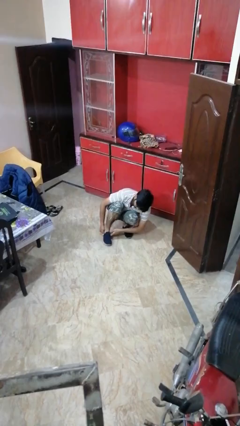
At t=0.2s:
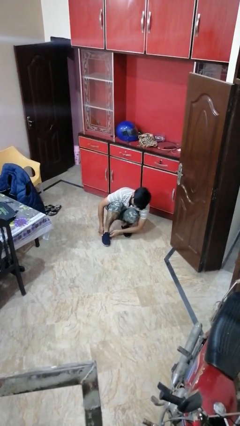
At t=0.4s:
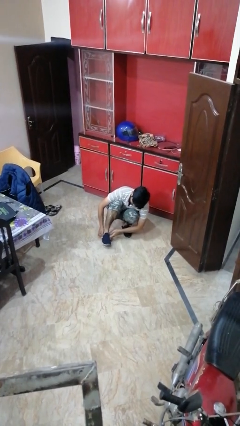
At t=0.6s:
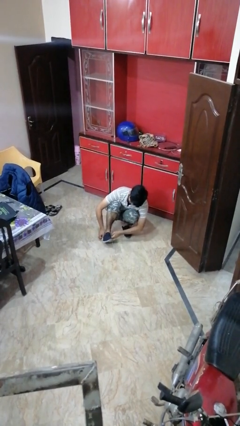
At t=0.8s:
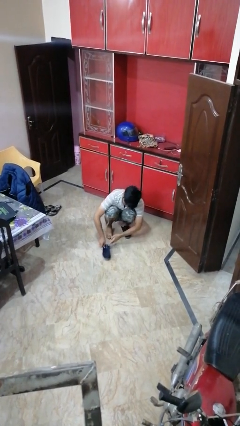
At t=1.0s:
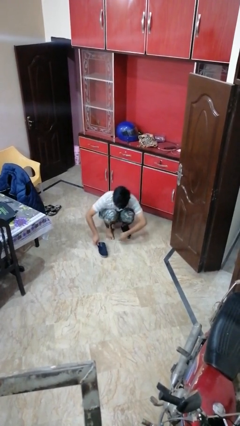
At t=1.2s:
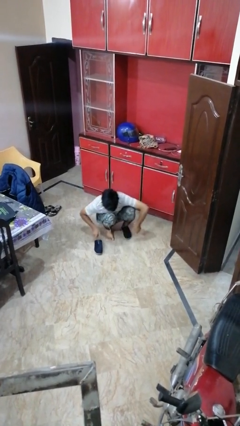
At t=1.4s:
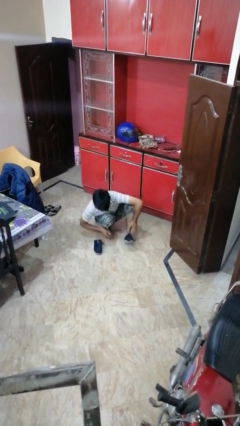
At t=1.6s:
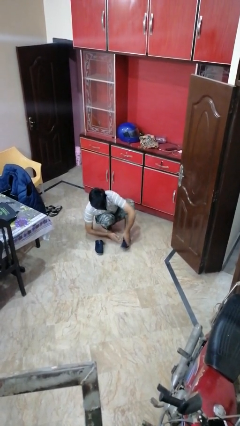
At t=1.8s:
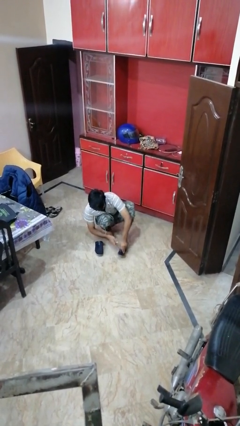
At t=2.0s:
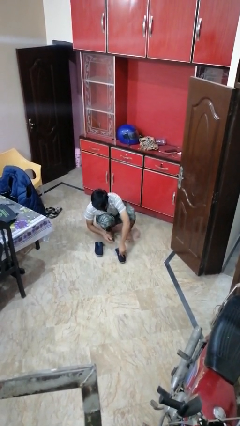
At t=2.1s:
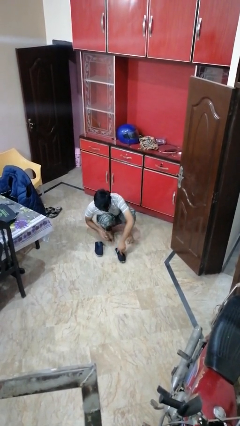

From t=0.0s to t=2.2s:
person takes off shoes

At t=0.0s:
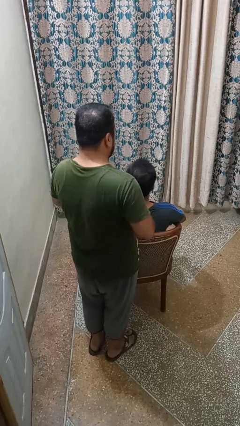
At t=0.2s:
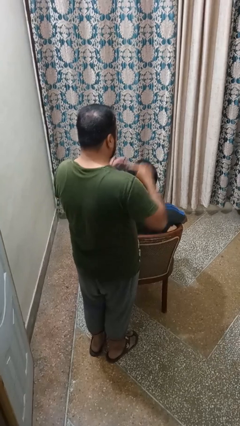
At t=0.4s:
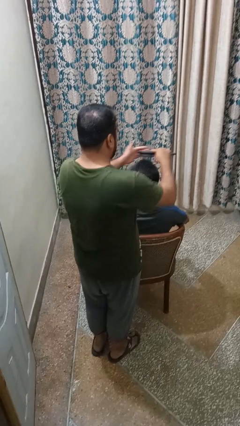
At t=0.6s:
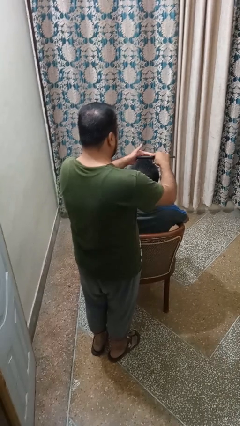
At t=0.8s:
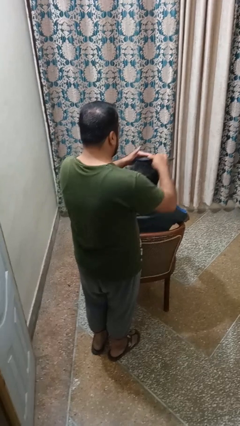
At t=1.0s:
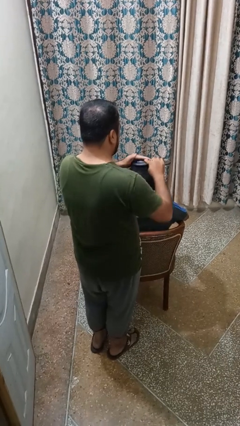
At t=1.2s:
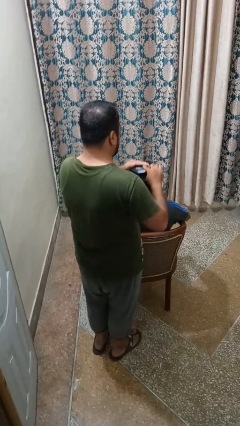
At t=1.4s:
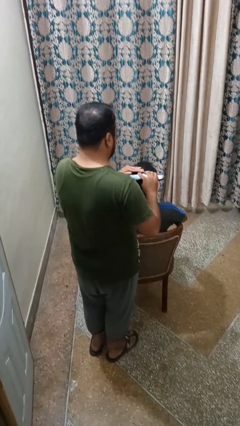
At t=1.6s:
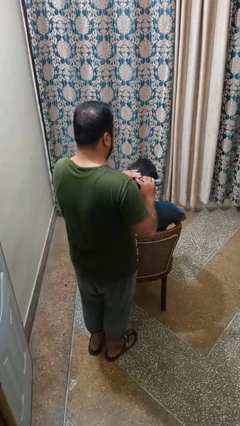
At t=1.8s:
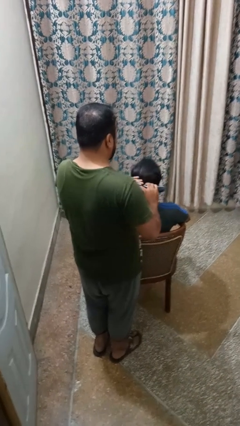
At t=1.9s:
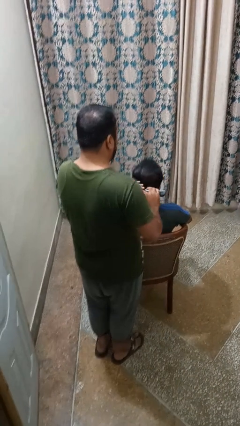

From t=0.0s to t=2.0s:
person brushes hair of person

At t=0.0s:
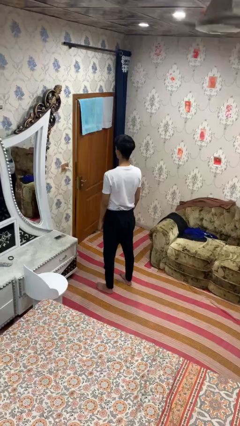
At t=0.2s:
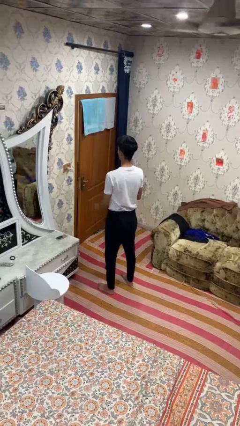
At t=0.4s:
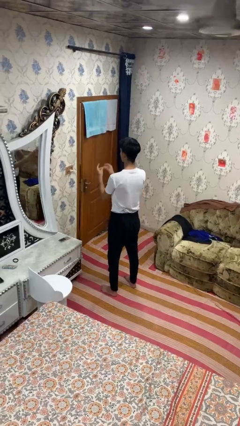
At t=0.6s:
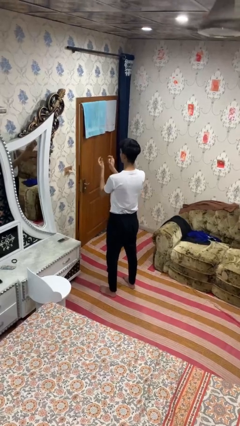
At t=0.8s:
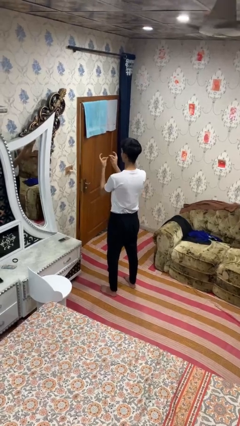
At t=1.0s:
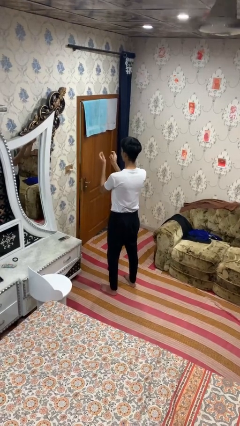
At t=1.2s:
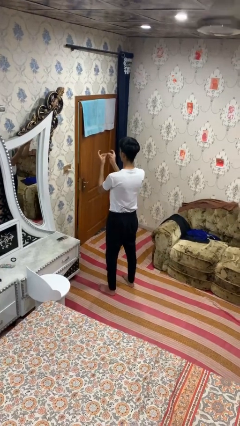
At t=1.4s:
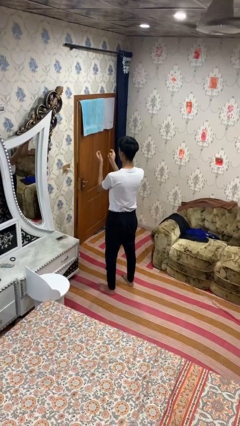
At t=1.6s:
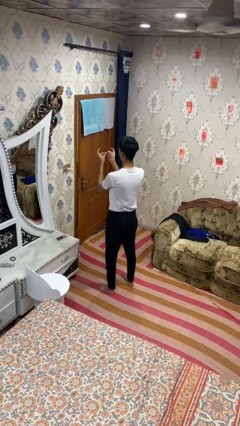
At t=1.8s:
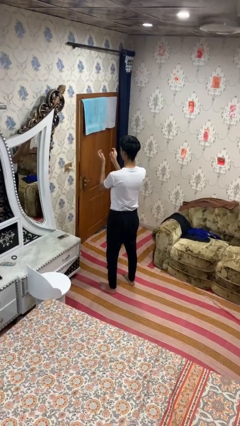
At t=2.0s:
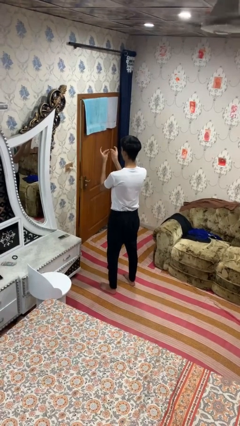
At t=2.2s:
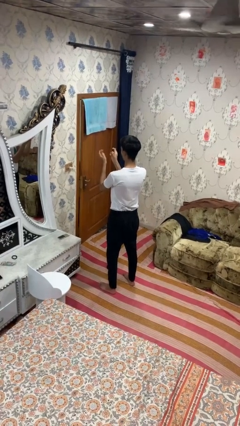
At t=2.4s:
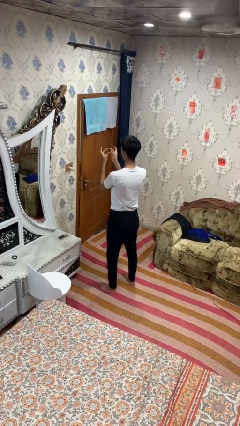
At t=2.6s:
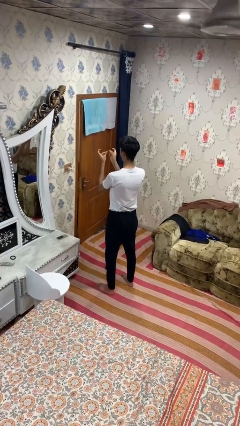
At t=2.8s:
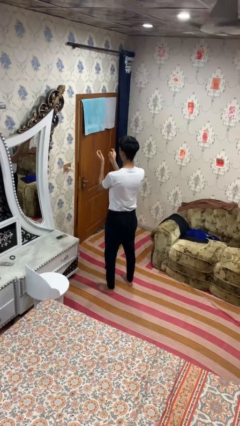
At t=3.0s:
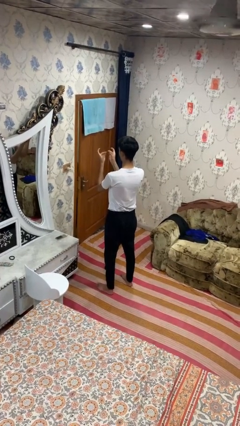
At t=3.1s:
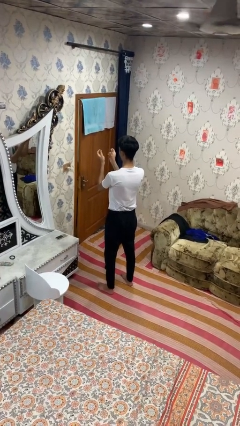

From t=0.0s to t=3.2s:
person snaps fingers

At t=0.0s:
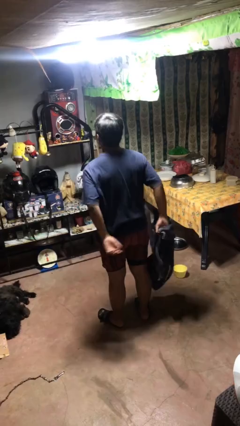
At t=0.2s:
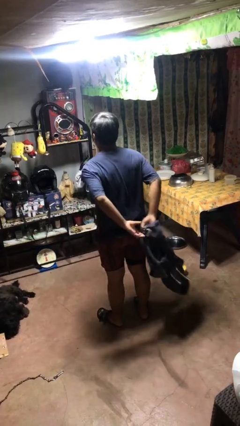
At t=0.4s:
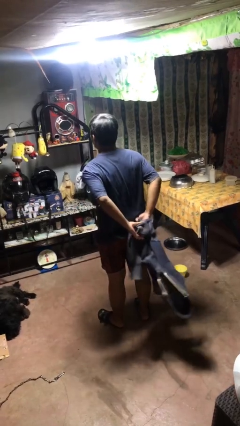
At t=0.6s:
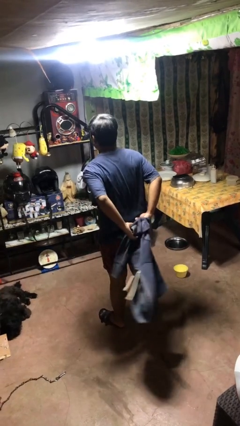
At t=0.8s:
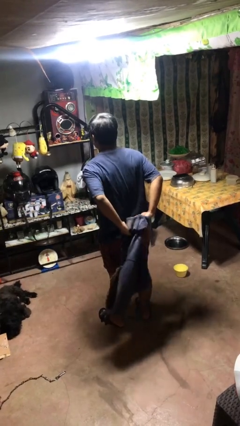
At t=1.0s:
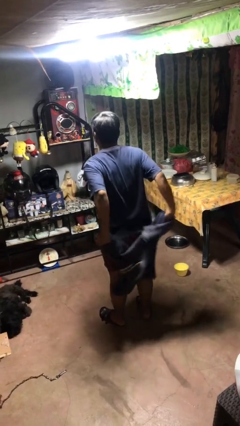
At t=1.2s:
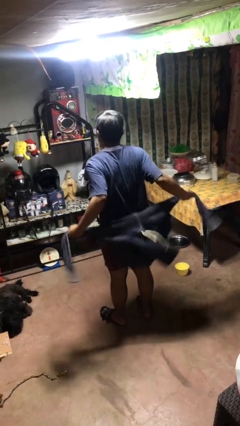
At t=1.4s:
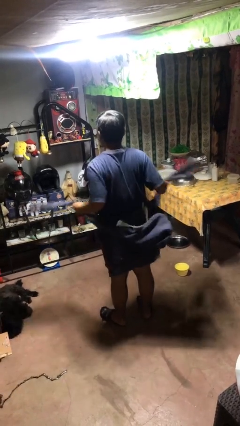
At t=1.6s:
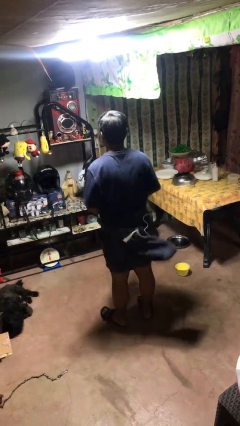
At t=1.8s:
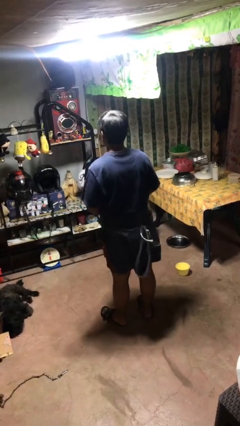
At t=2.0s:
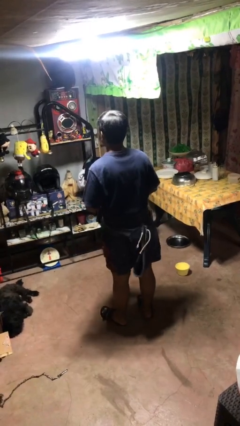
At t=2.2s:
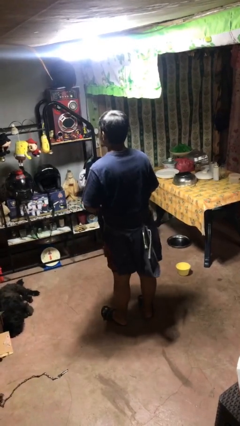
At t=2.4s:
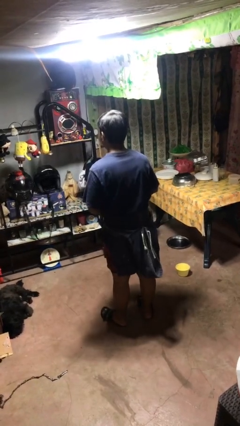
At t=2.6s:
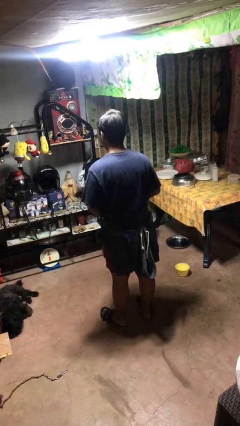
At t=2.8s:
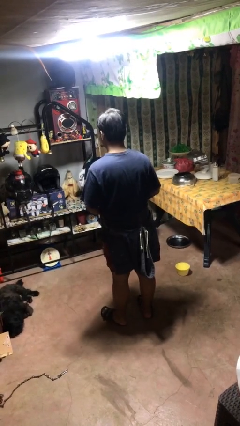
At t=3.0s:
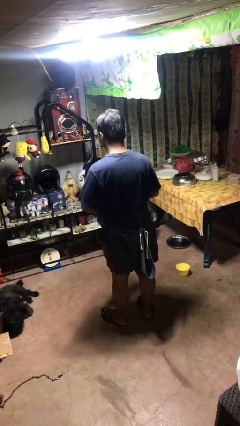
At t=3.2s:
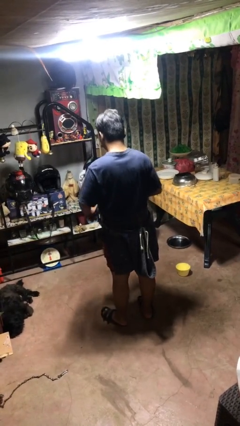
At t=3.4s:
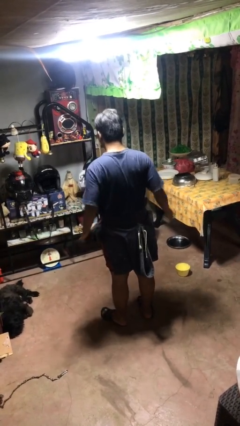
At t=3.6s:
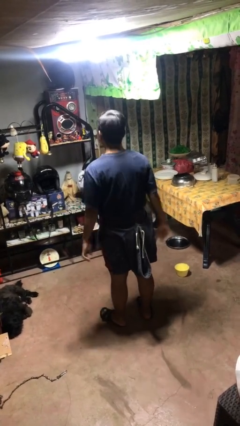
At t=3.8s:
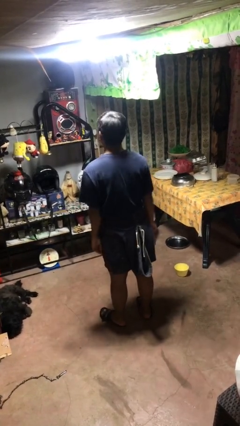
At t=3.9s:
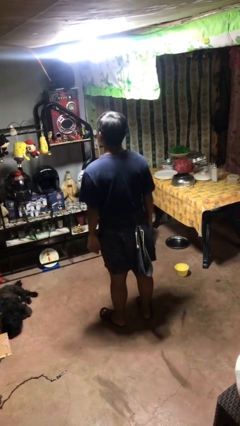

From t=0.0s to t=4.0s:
person ties jacket around waist

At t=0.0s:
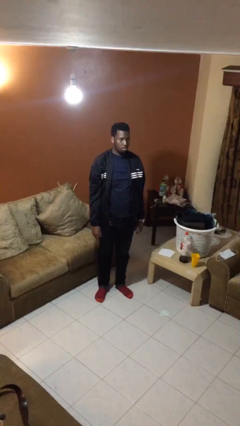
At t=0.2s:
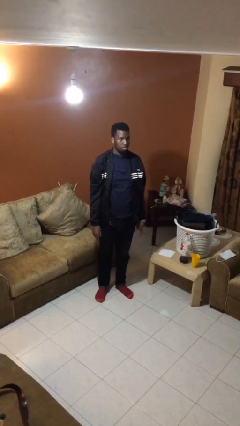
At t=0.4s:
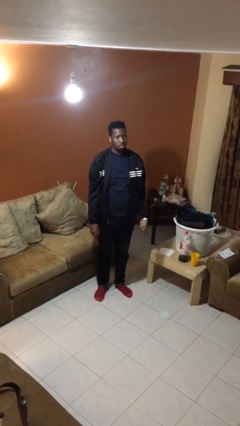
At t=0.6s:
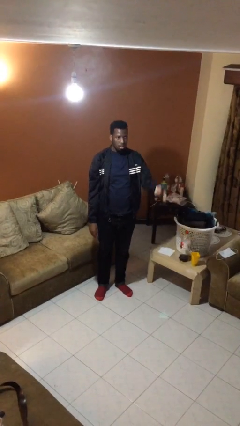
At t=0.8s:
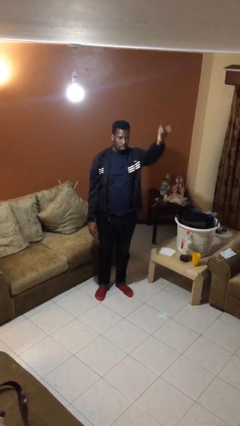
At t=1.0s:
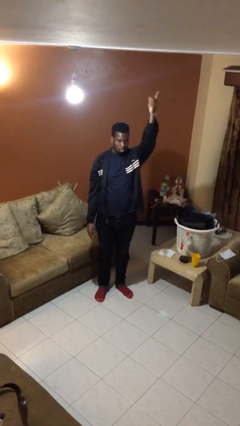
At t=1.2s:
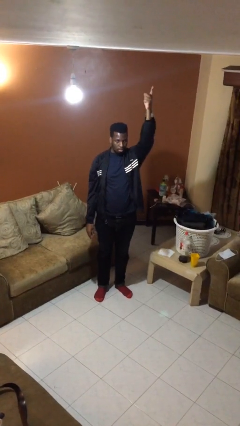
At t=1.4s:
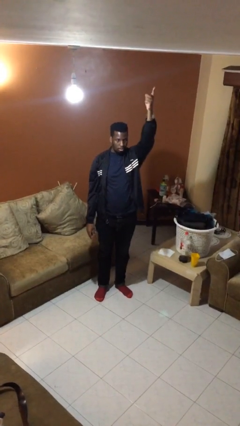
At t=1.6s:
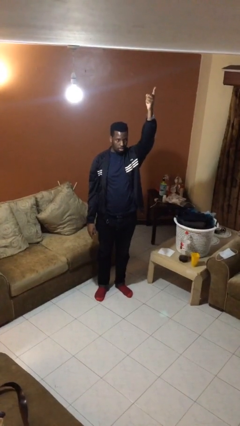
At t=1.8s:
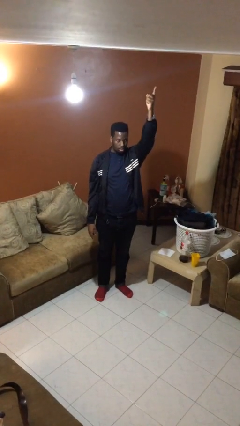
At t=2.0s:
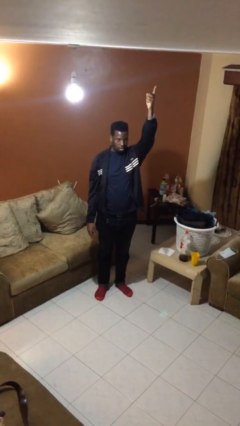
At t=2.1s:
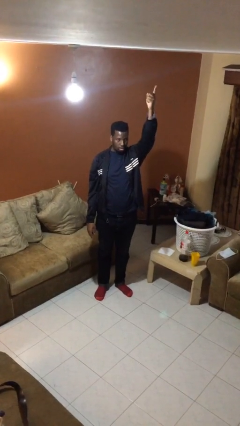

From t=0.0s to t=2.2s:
person gestures swipe up

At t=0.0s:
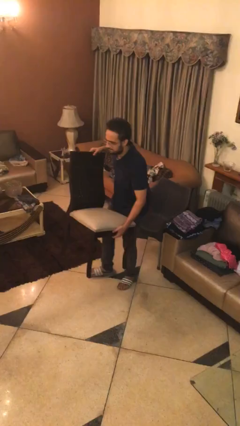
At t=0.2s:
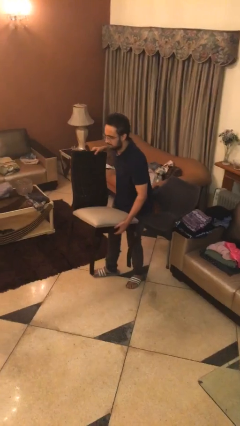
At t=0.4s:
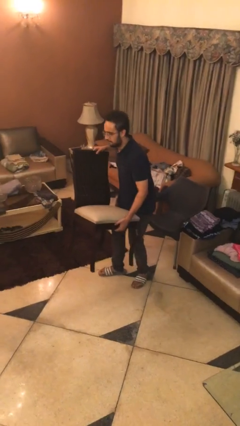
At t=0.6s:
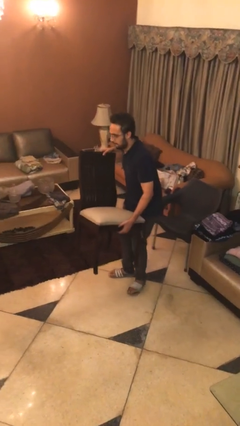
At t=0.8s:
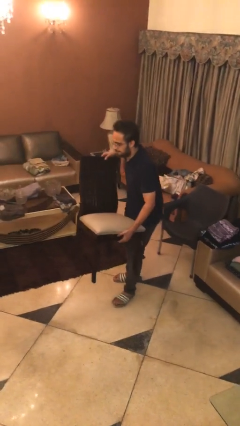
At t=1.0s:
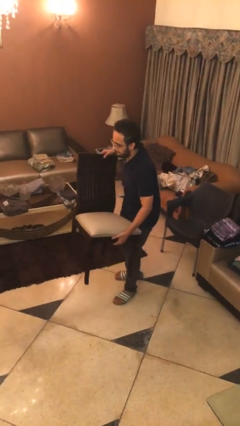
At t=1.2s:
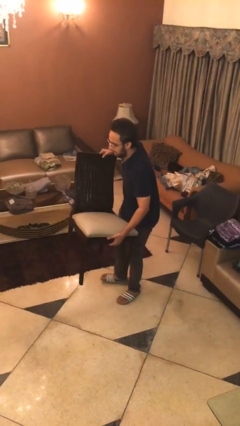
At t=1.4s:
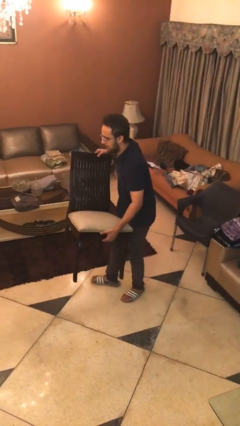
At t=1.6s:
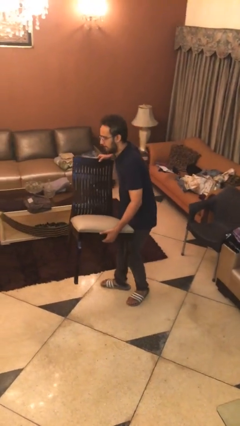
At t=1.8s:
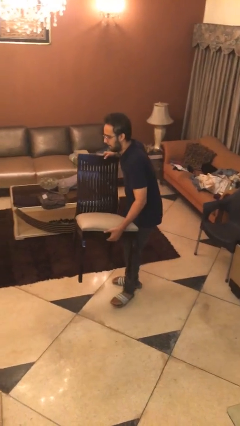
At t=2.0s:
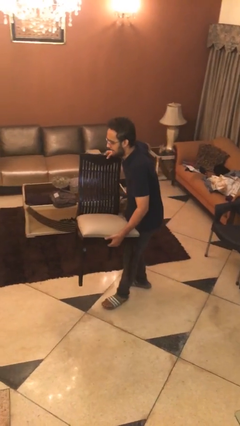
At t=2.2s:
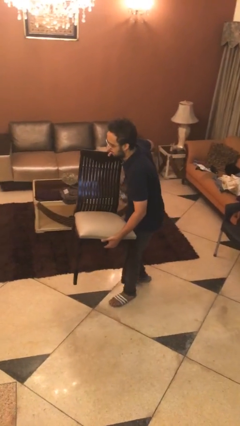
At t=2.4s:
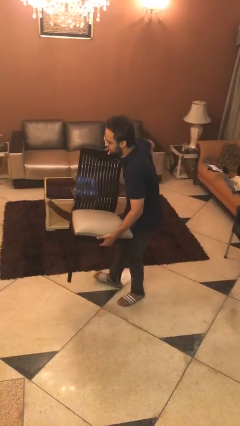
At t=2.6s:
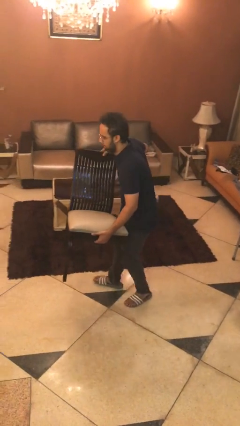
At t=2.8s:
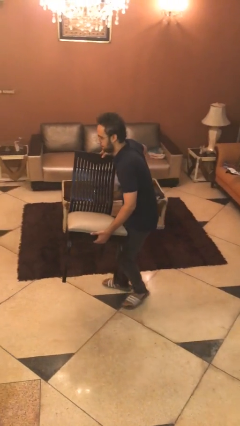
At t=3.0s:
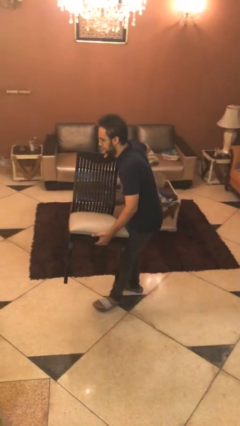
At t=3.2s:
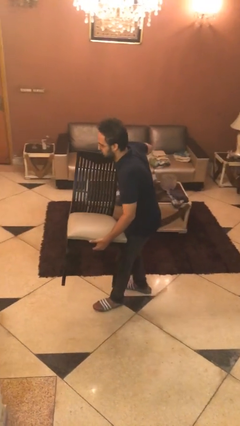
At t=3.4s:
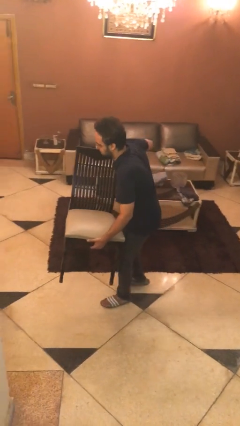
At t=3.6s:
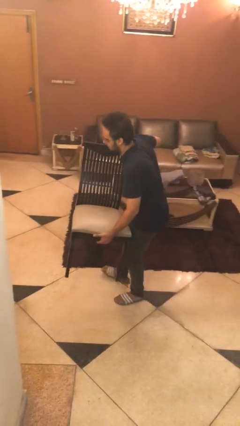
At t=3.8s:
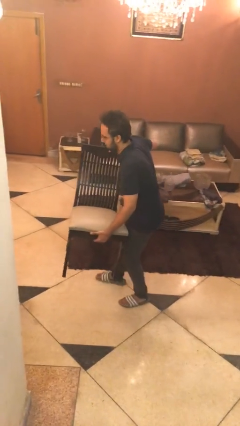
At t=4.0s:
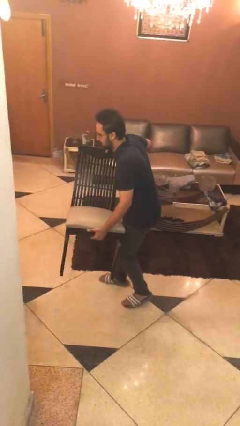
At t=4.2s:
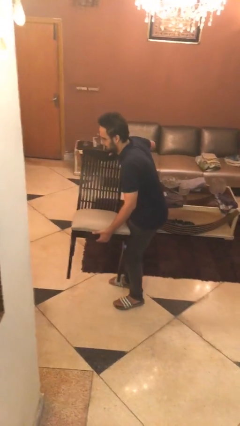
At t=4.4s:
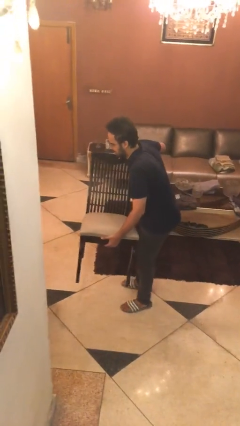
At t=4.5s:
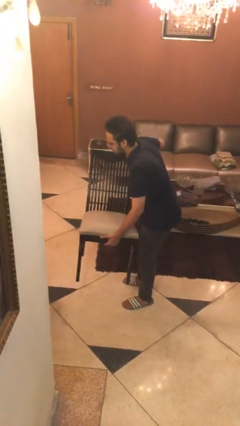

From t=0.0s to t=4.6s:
person carries heavy object
